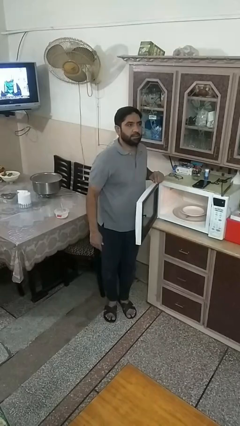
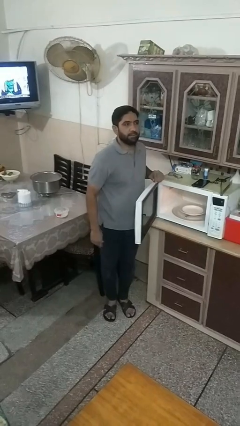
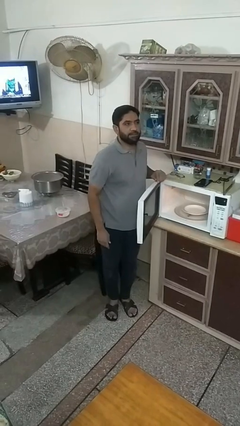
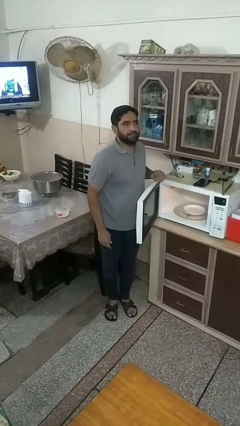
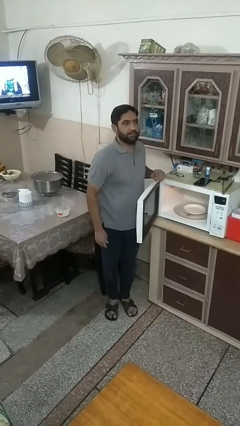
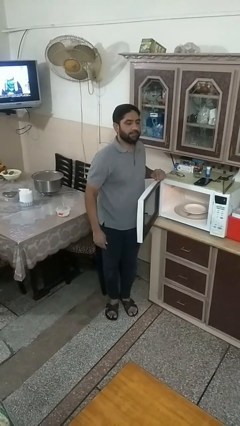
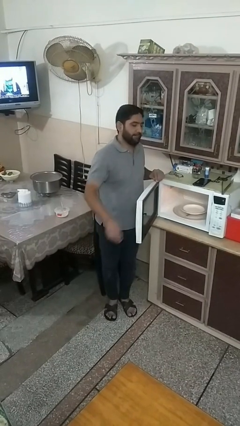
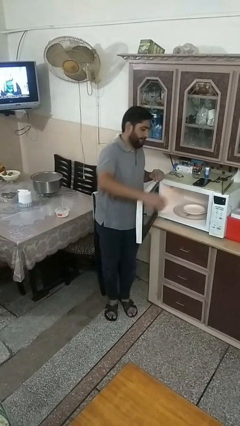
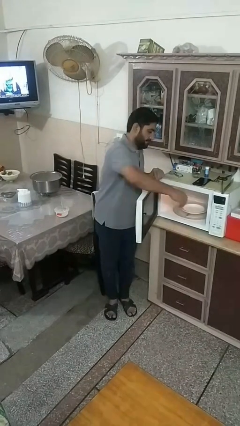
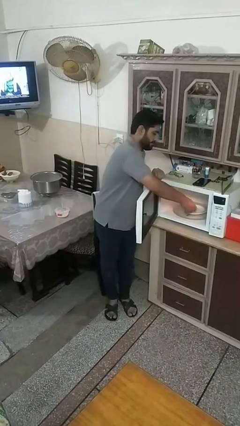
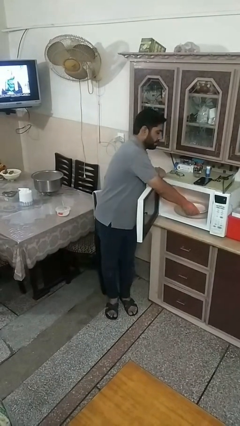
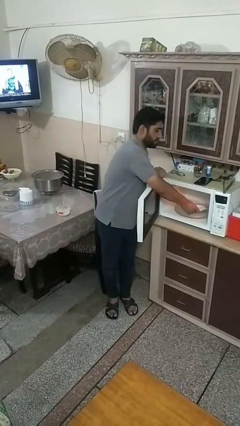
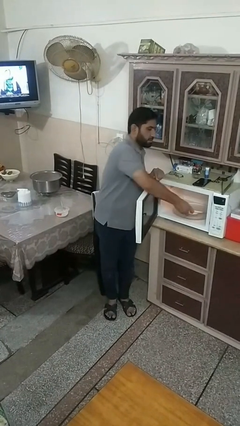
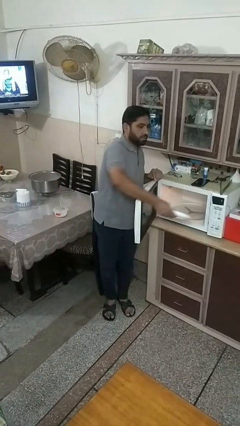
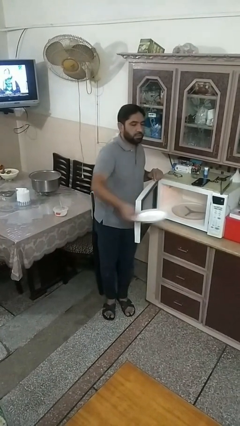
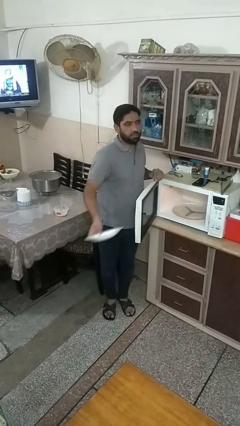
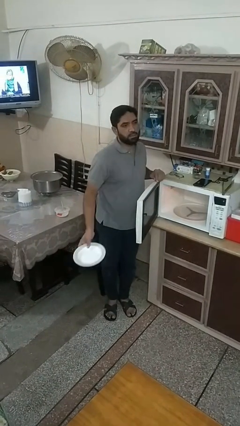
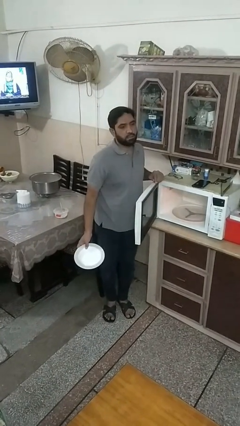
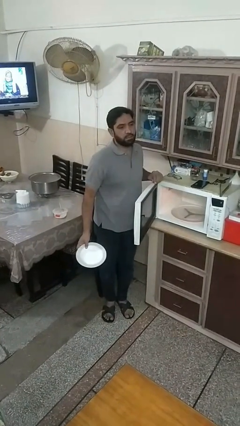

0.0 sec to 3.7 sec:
person takes object from microwave

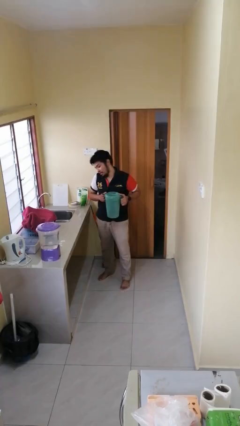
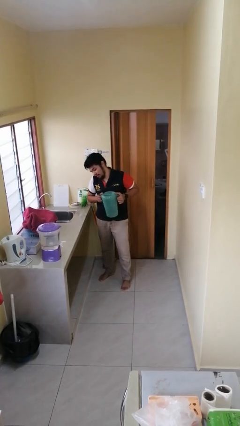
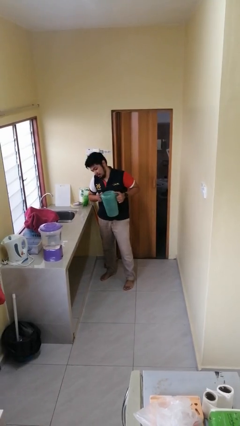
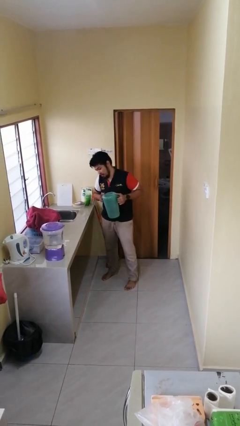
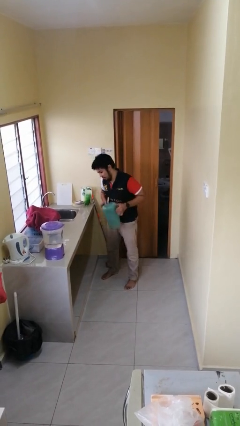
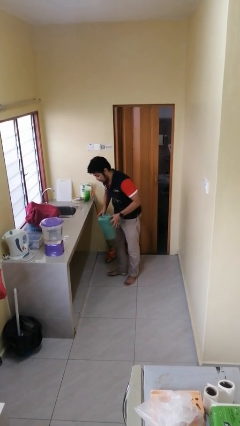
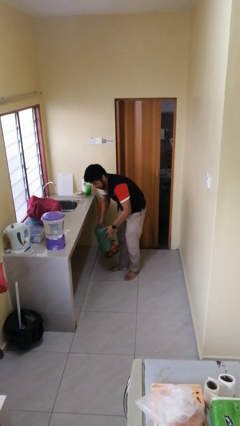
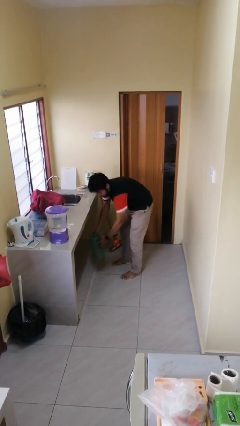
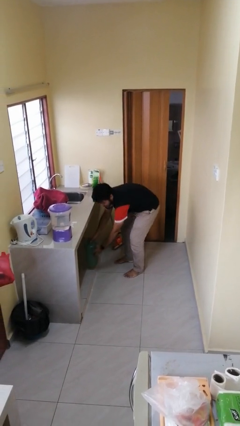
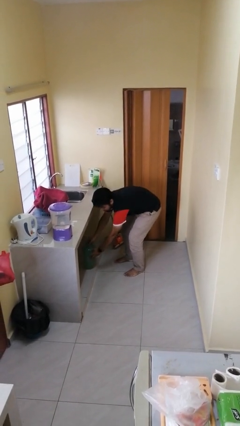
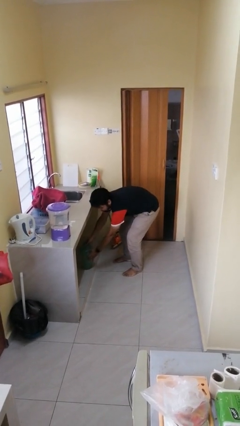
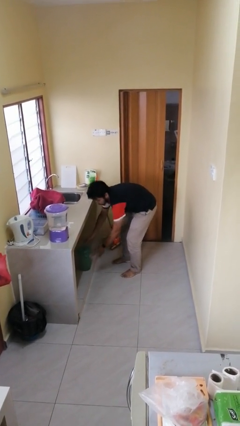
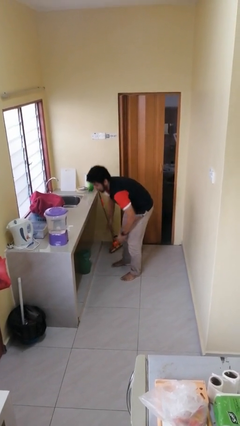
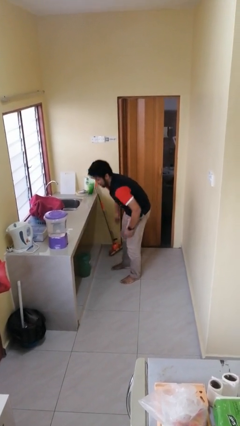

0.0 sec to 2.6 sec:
person puts down object into cabinet

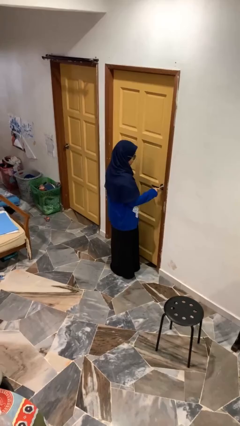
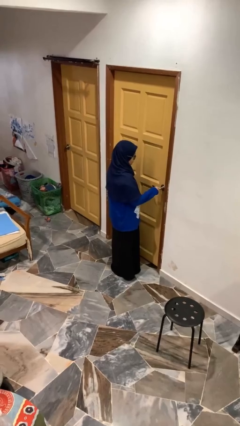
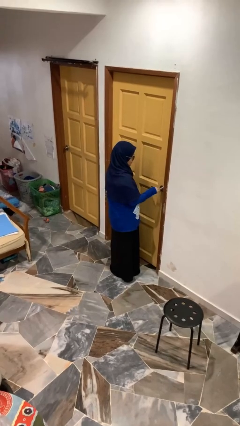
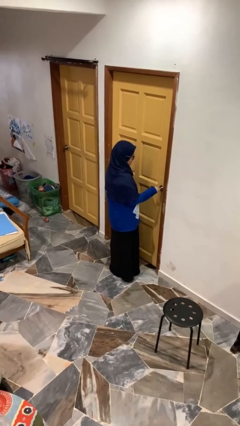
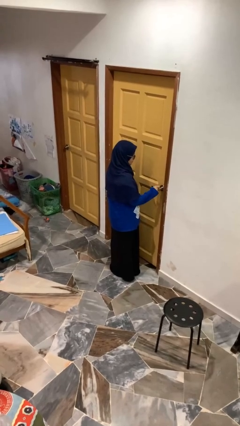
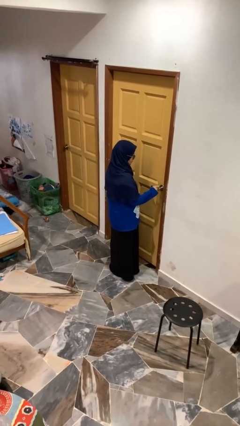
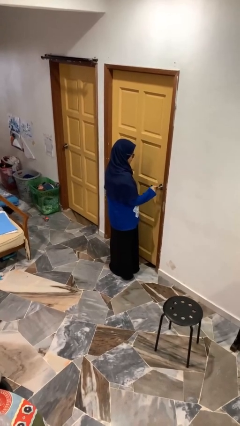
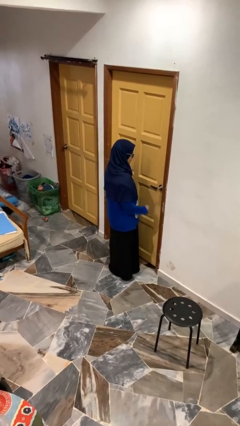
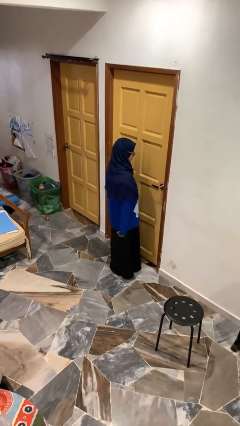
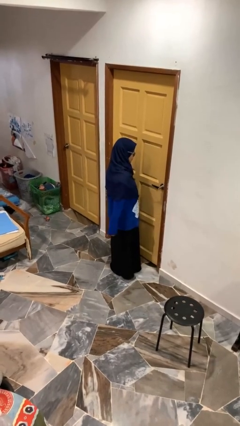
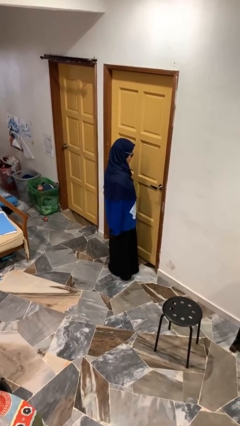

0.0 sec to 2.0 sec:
person locks door with keys

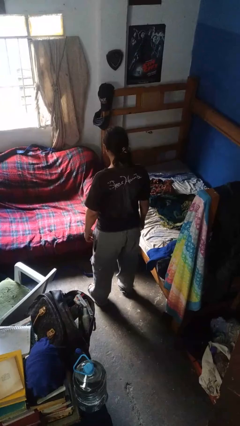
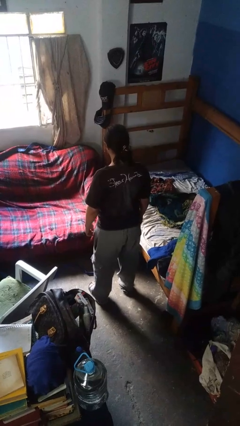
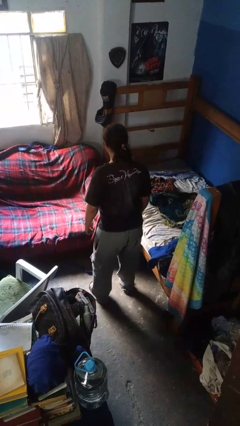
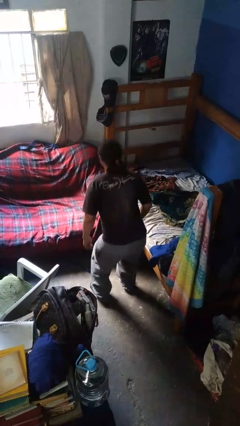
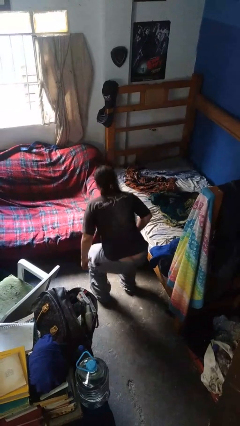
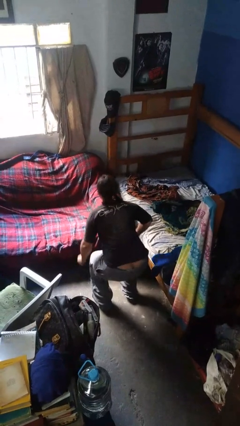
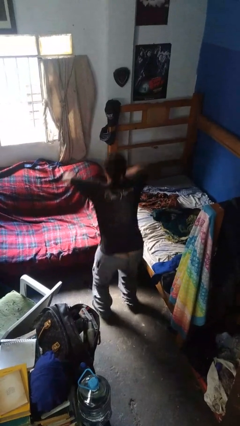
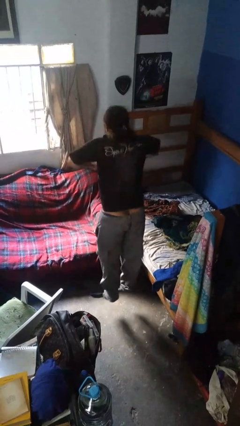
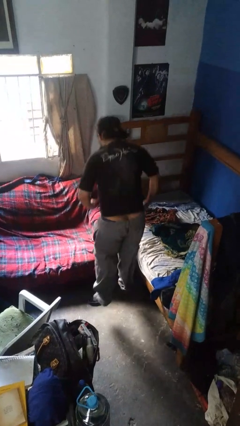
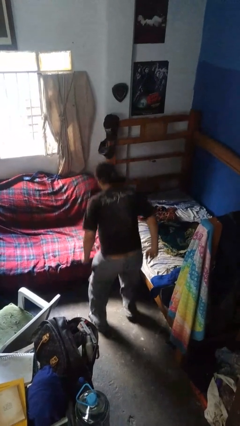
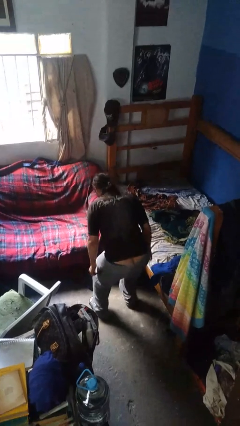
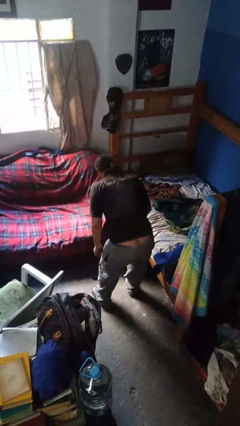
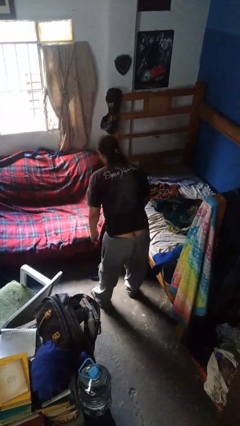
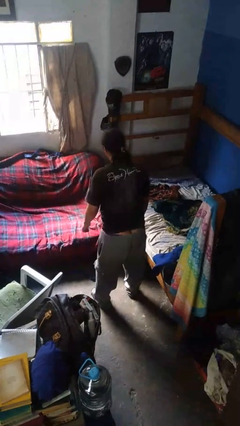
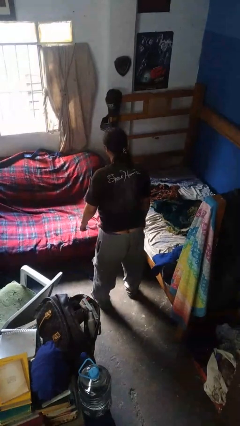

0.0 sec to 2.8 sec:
person jumps

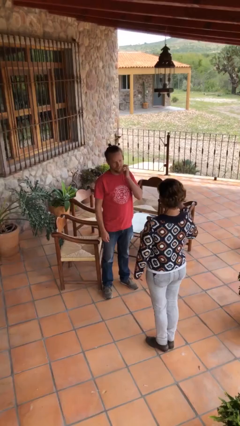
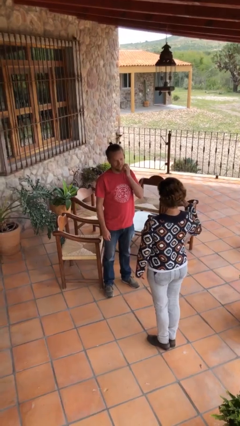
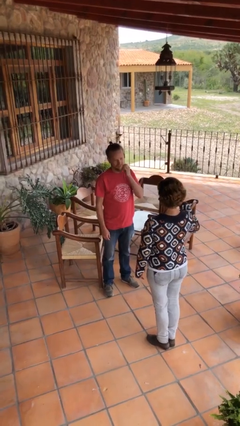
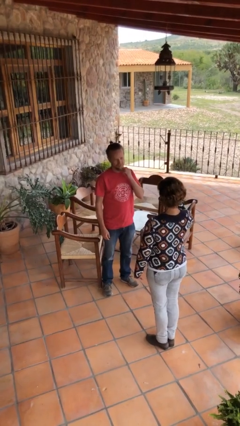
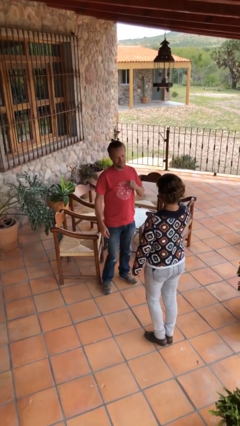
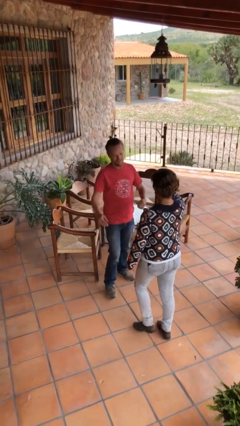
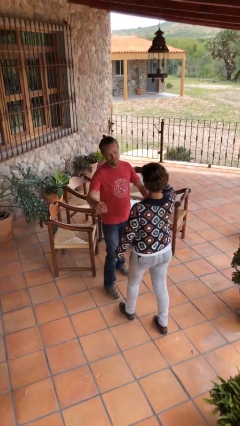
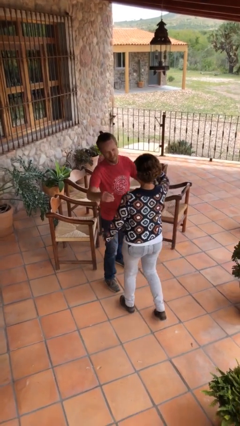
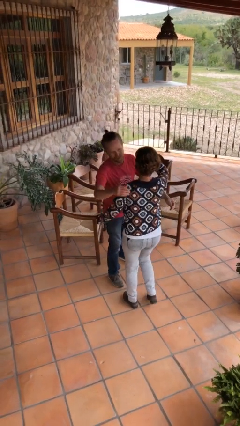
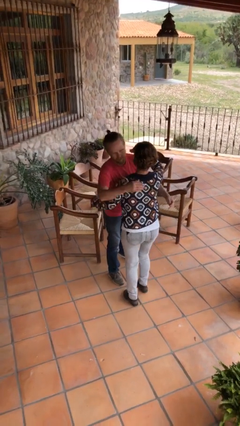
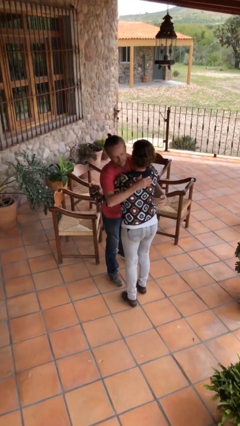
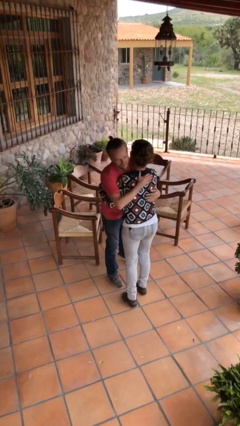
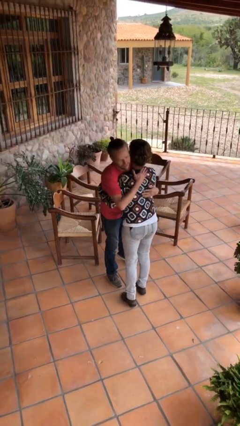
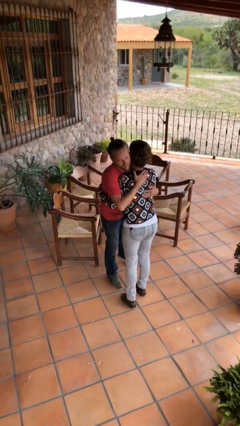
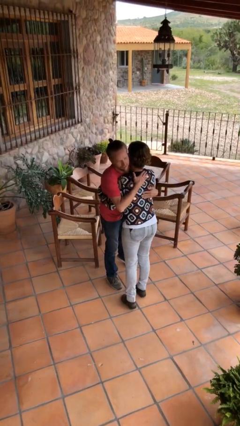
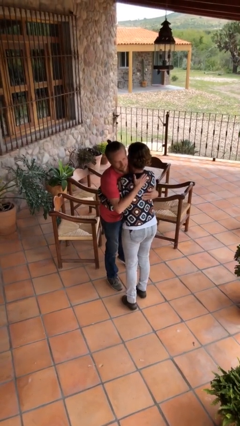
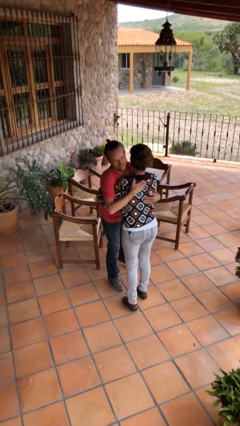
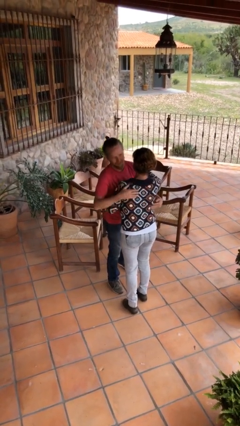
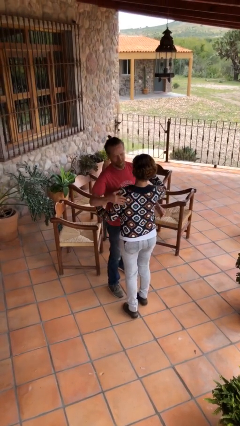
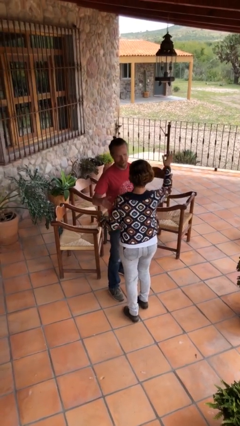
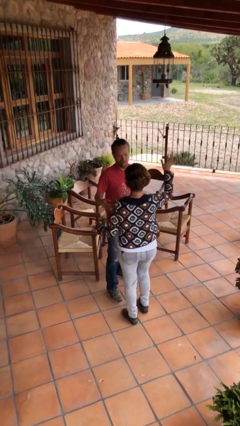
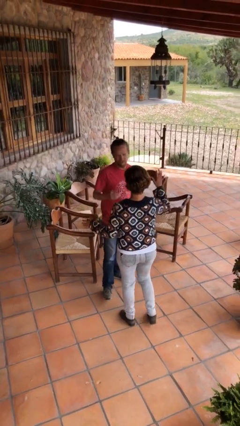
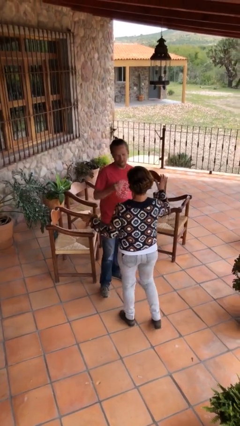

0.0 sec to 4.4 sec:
person embraces person

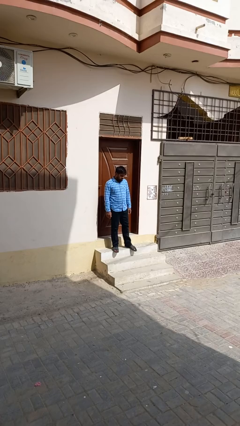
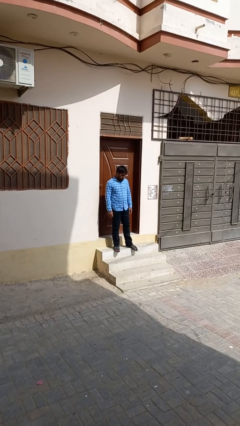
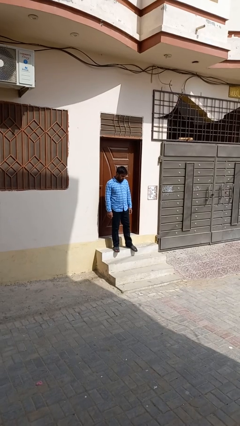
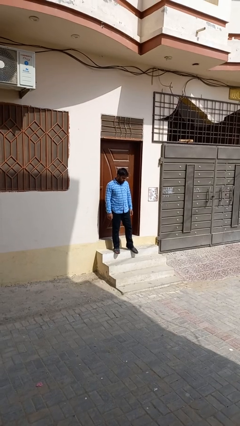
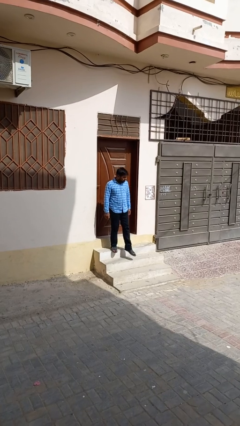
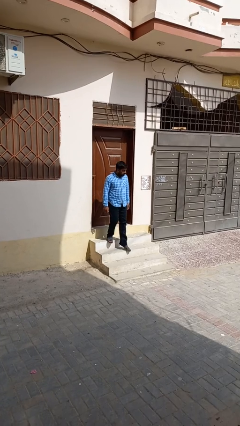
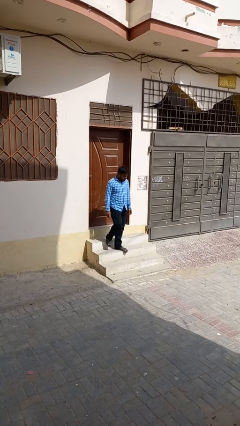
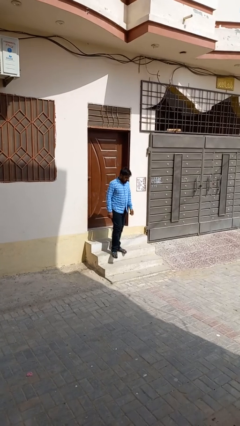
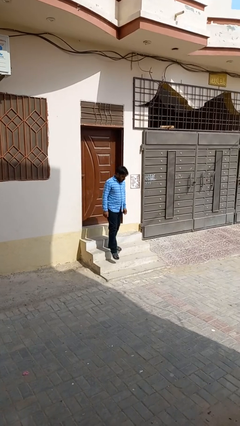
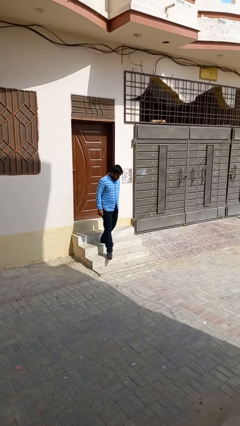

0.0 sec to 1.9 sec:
person climbs down stairs
